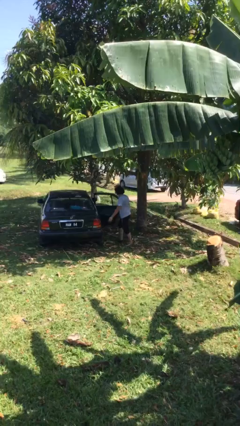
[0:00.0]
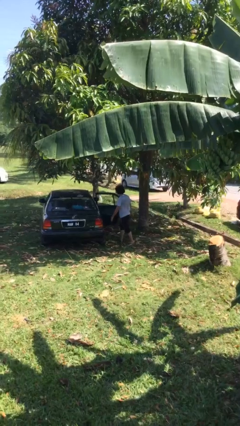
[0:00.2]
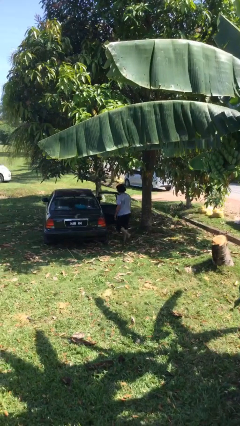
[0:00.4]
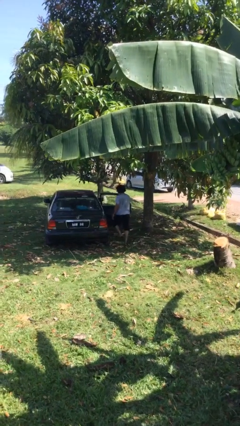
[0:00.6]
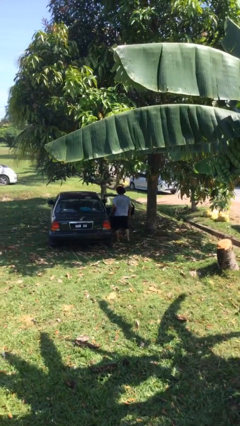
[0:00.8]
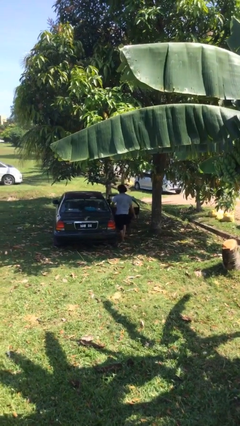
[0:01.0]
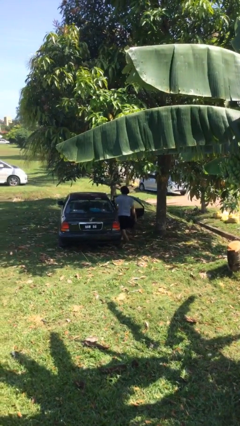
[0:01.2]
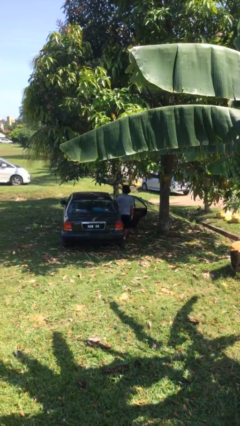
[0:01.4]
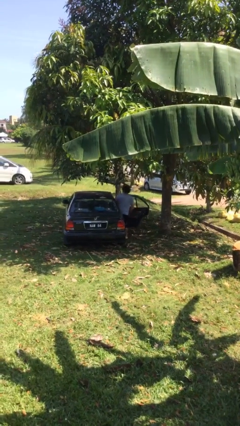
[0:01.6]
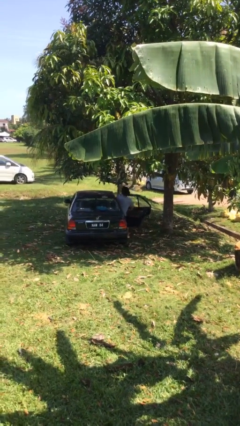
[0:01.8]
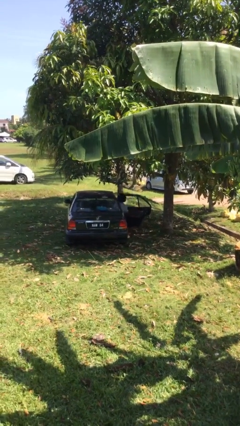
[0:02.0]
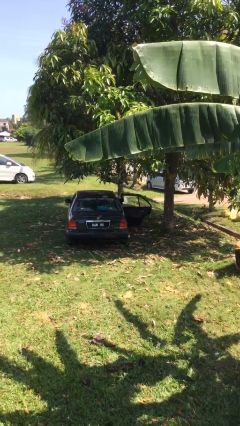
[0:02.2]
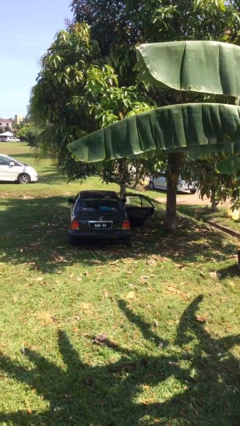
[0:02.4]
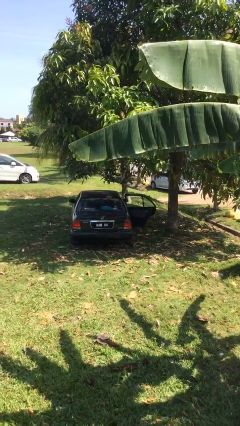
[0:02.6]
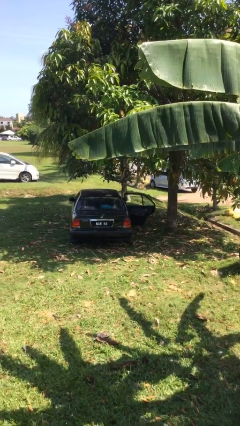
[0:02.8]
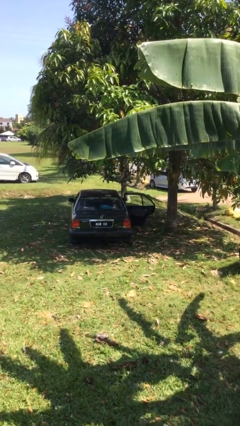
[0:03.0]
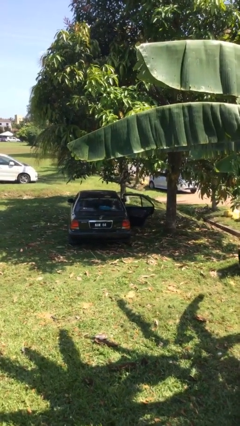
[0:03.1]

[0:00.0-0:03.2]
person enters car

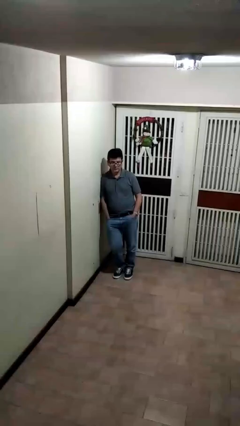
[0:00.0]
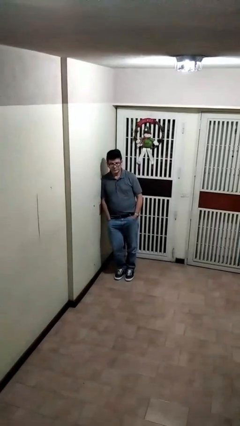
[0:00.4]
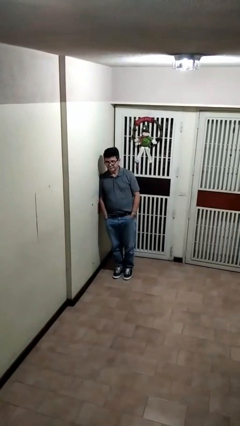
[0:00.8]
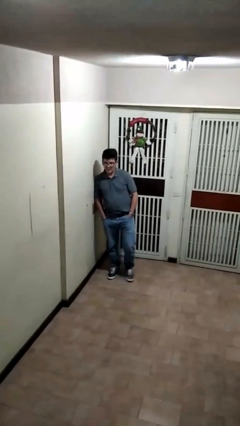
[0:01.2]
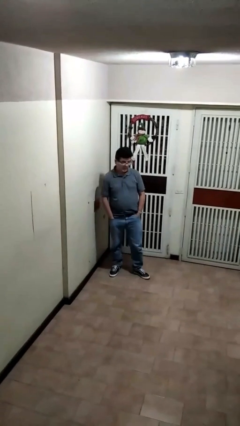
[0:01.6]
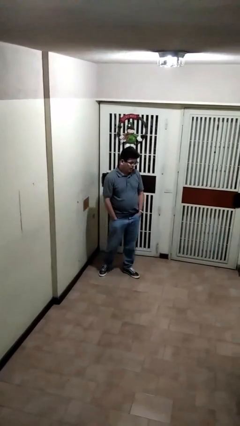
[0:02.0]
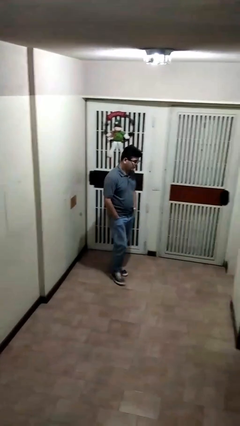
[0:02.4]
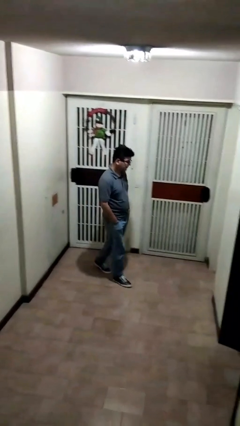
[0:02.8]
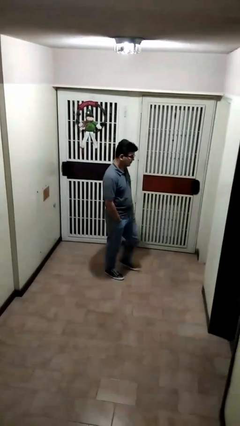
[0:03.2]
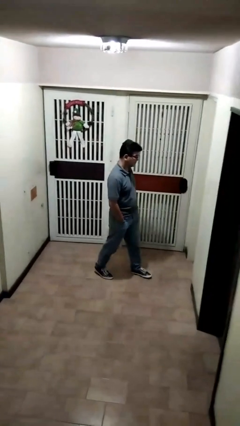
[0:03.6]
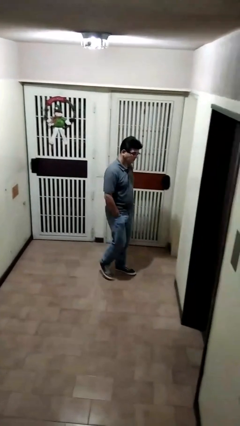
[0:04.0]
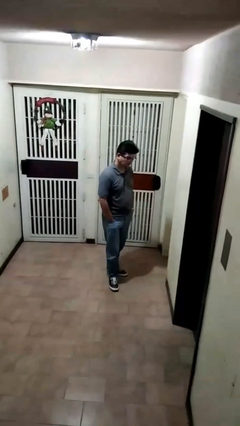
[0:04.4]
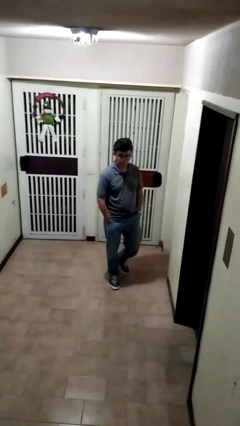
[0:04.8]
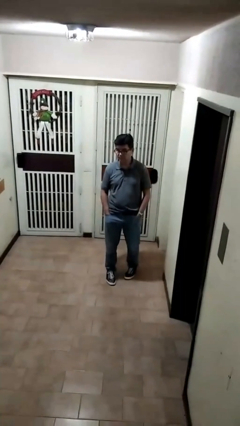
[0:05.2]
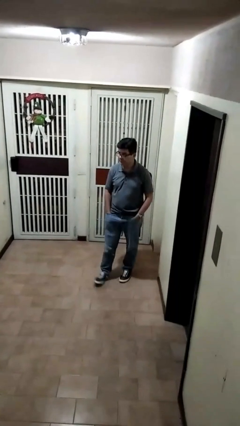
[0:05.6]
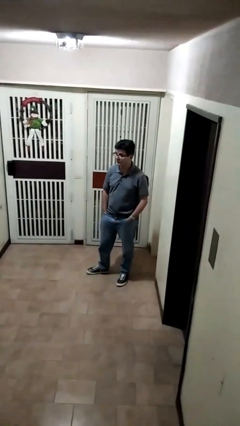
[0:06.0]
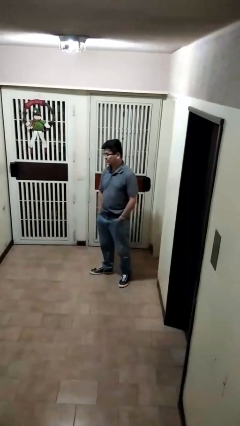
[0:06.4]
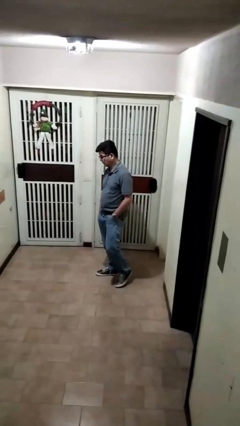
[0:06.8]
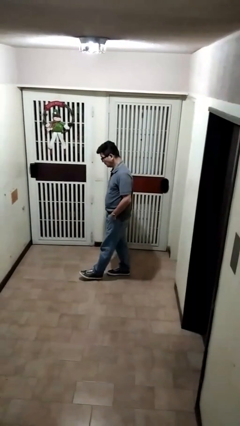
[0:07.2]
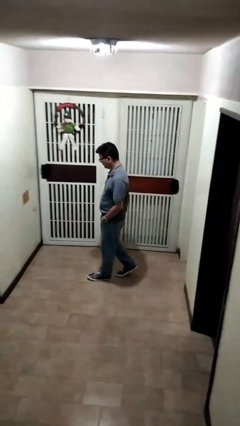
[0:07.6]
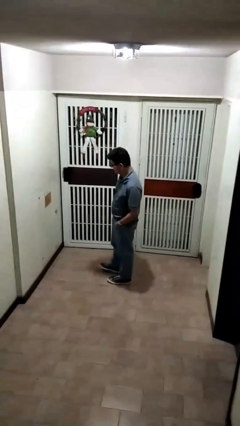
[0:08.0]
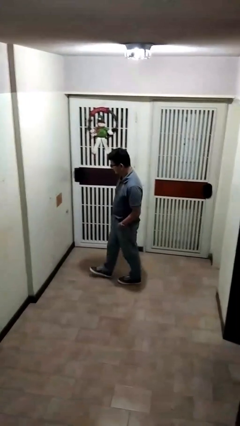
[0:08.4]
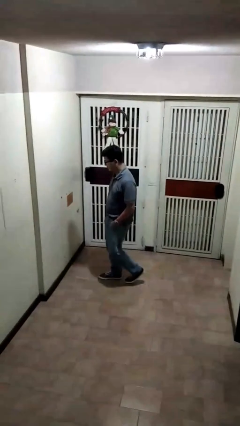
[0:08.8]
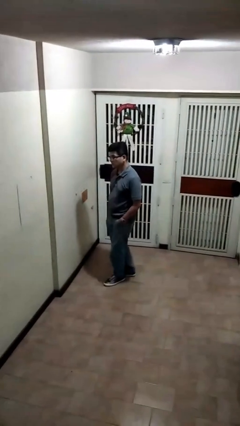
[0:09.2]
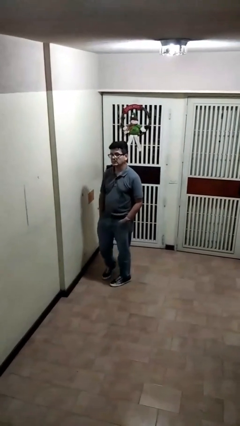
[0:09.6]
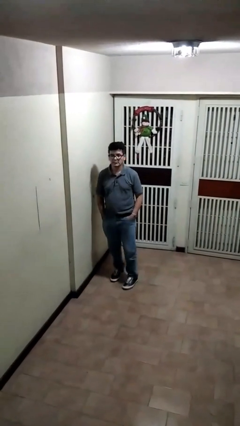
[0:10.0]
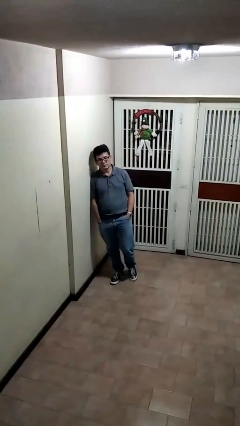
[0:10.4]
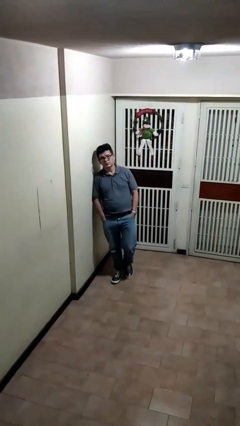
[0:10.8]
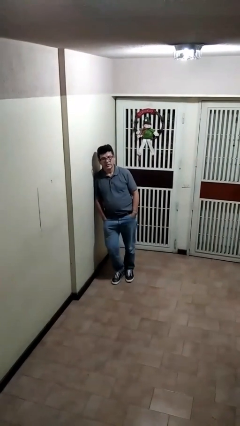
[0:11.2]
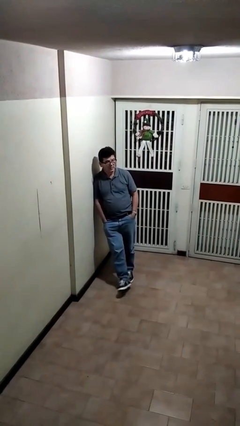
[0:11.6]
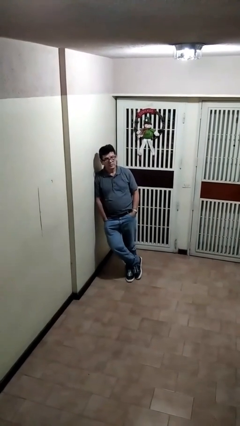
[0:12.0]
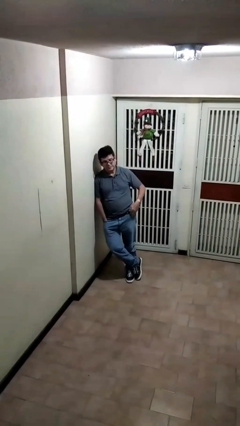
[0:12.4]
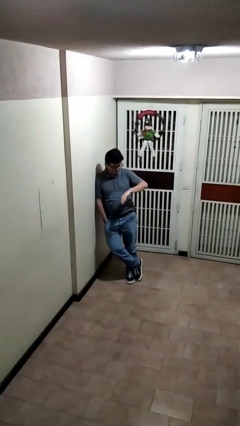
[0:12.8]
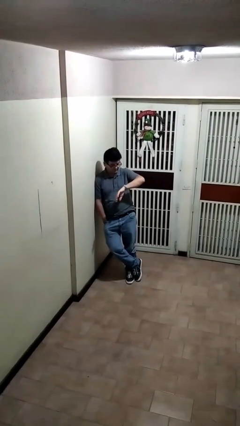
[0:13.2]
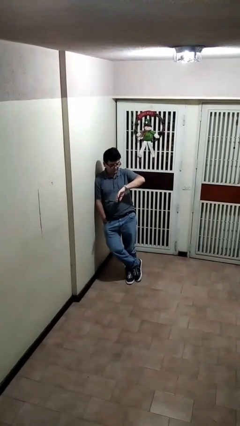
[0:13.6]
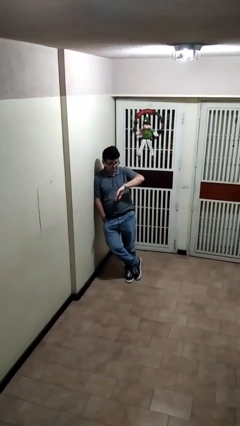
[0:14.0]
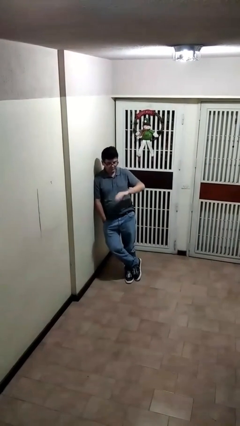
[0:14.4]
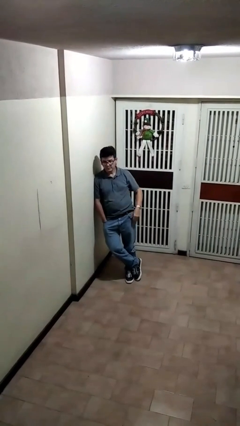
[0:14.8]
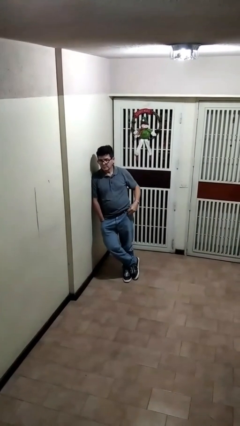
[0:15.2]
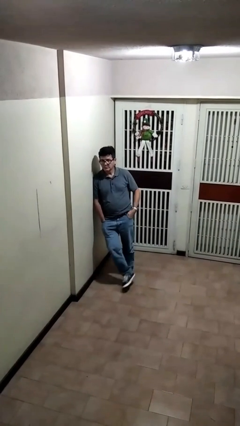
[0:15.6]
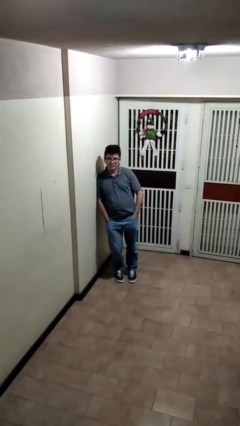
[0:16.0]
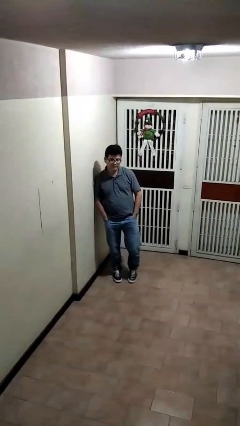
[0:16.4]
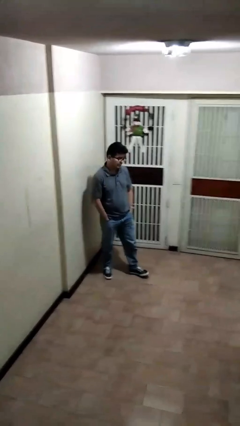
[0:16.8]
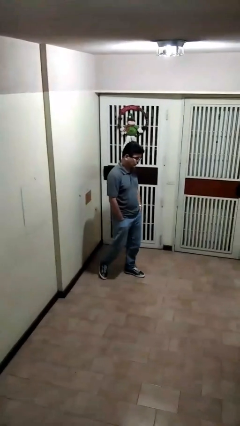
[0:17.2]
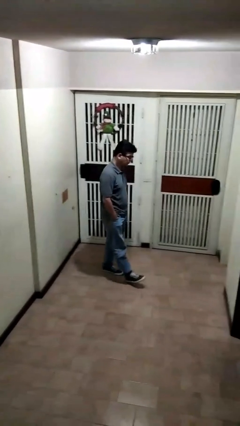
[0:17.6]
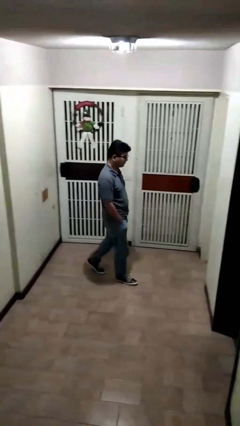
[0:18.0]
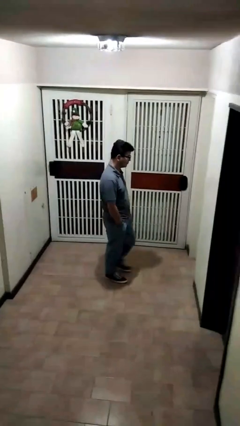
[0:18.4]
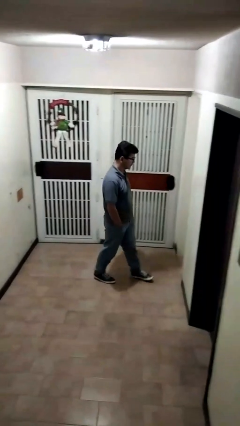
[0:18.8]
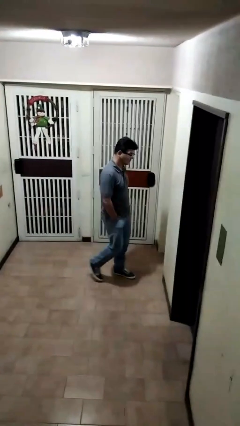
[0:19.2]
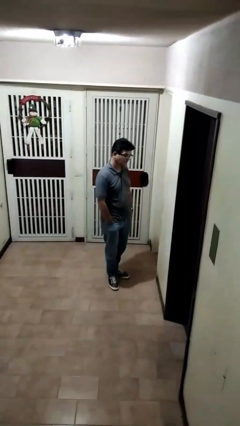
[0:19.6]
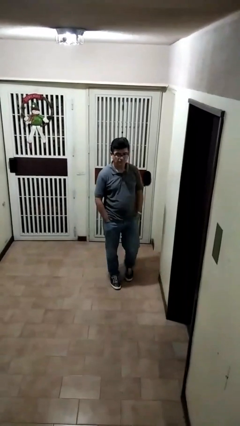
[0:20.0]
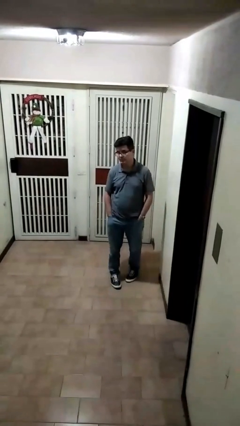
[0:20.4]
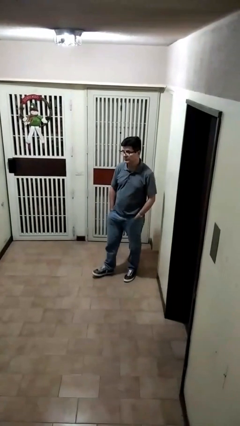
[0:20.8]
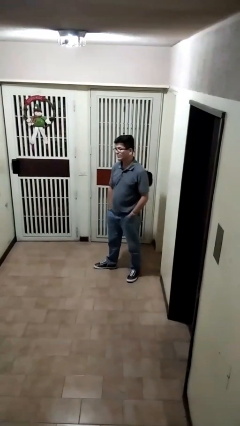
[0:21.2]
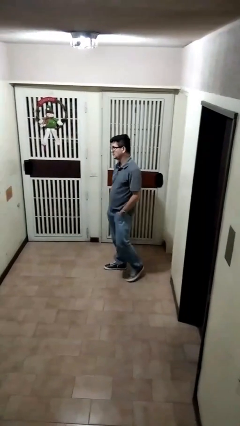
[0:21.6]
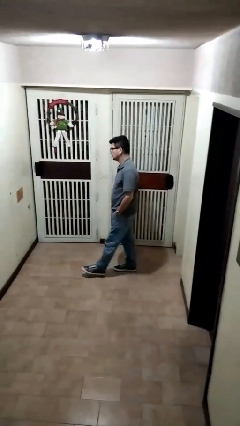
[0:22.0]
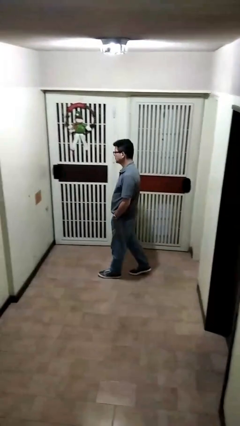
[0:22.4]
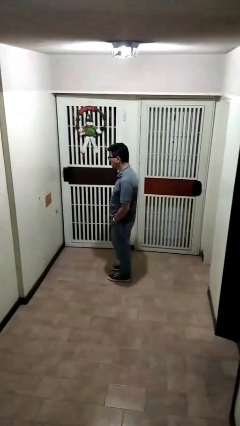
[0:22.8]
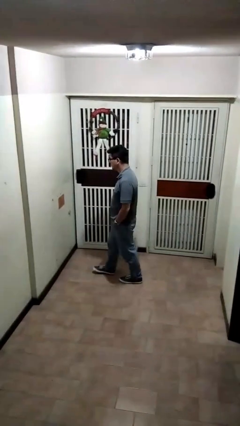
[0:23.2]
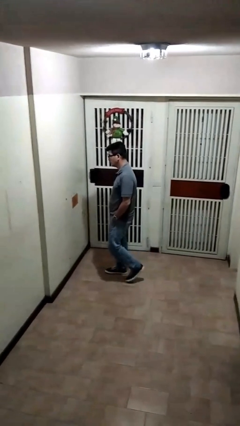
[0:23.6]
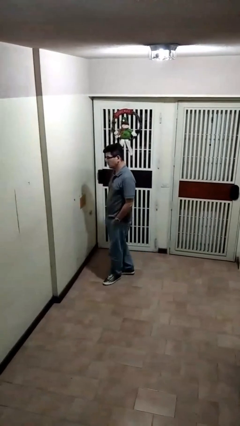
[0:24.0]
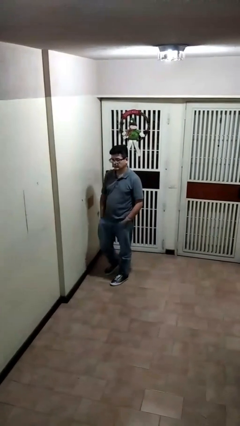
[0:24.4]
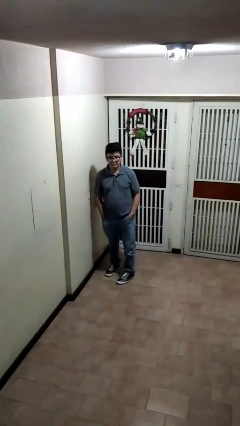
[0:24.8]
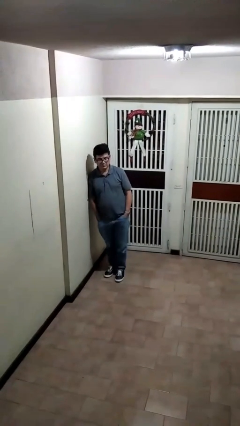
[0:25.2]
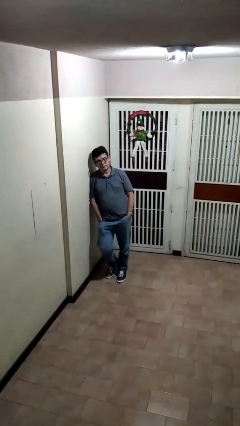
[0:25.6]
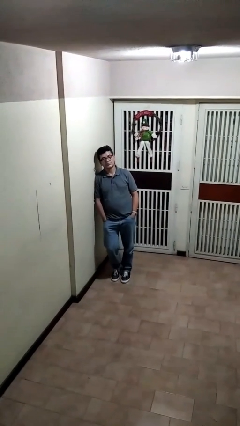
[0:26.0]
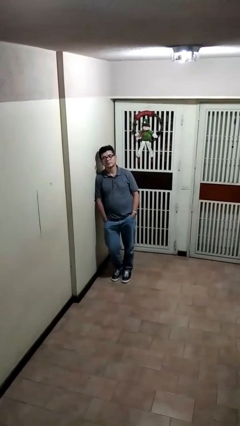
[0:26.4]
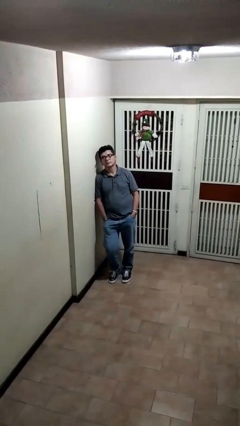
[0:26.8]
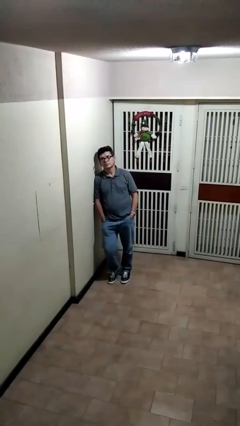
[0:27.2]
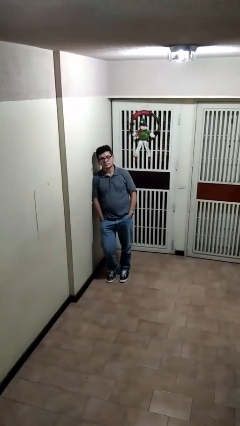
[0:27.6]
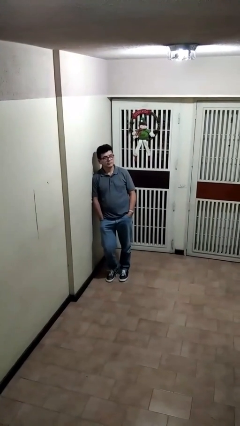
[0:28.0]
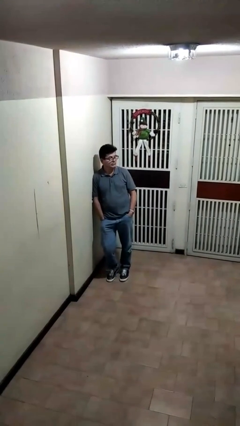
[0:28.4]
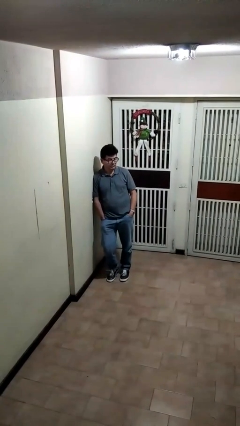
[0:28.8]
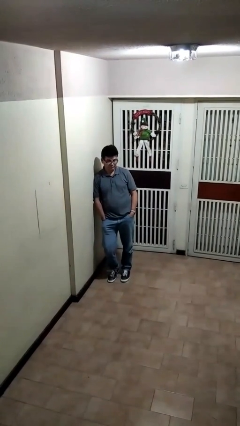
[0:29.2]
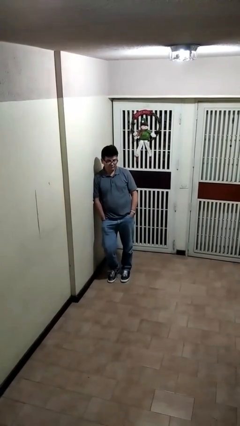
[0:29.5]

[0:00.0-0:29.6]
person walks
